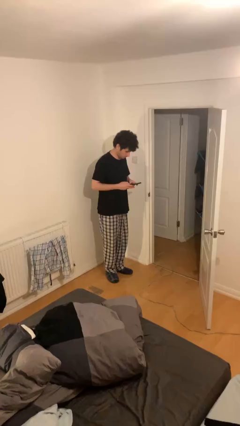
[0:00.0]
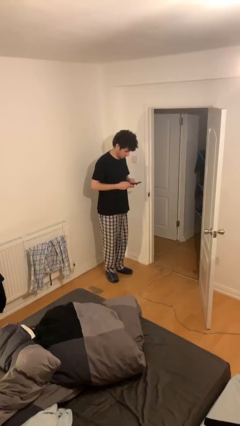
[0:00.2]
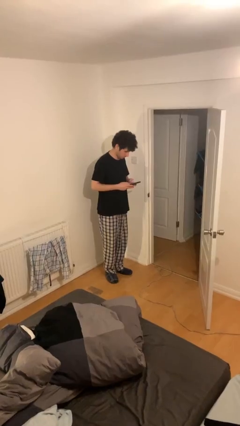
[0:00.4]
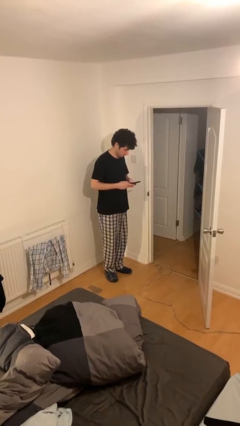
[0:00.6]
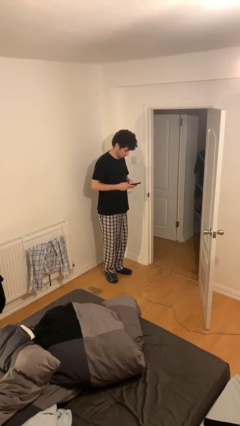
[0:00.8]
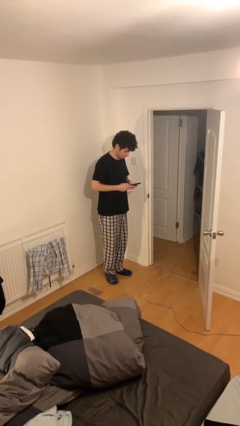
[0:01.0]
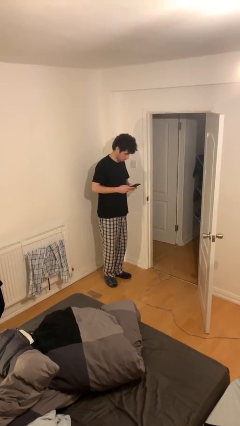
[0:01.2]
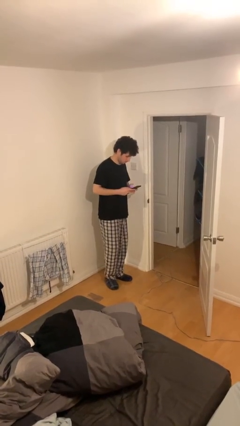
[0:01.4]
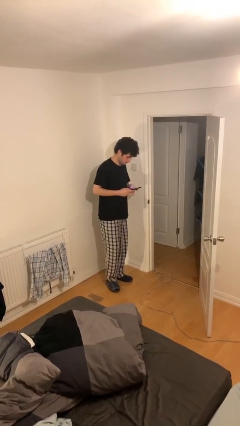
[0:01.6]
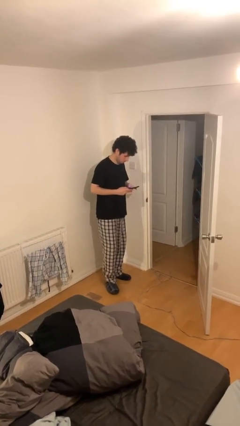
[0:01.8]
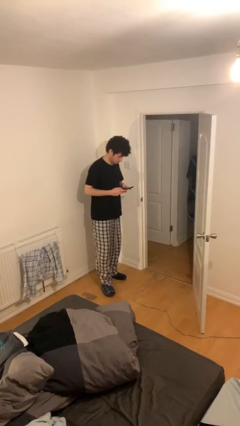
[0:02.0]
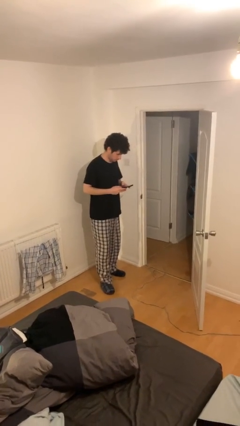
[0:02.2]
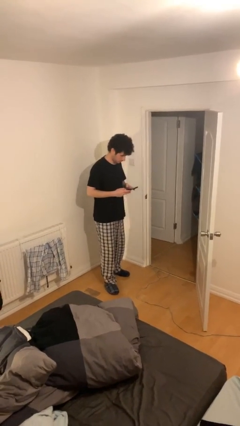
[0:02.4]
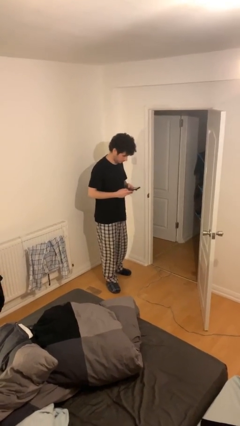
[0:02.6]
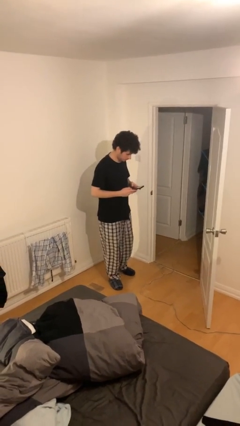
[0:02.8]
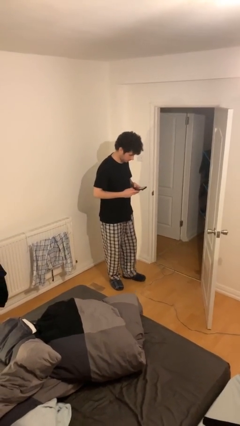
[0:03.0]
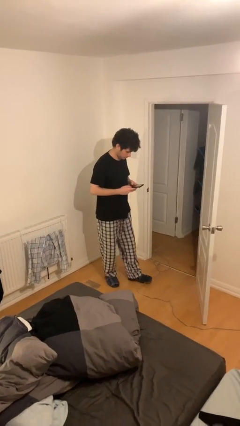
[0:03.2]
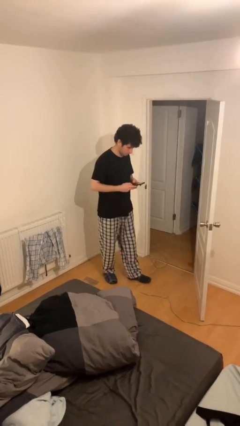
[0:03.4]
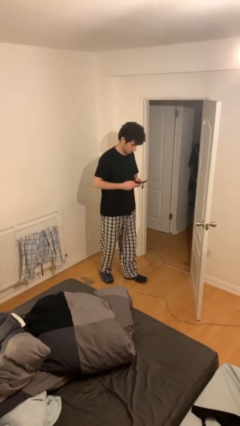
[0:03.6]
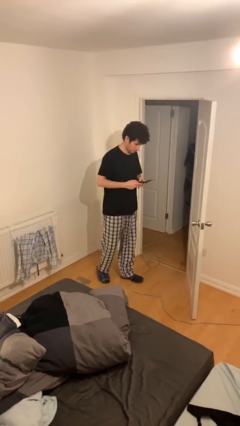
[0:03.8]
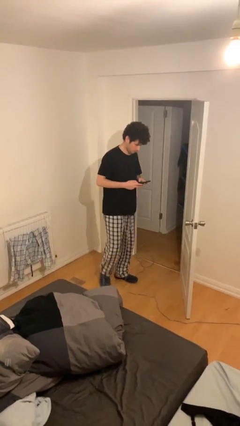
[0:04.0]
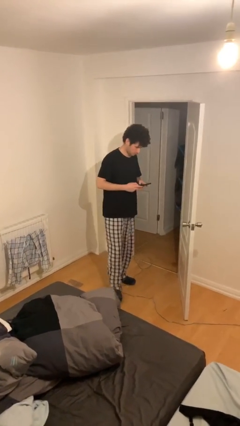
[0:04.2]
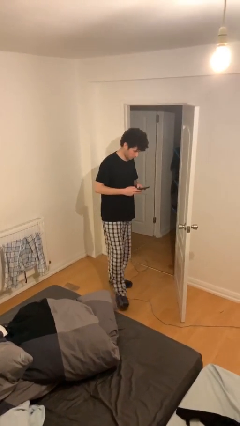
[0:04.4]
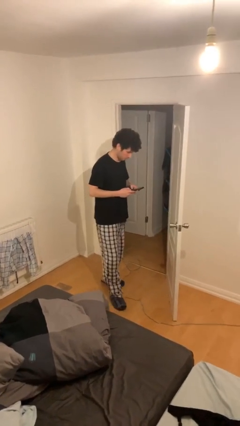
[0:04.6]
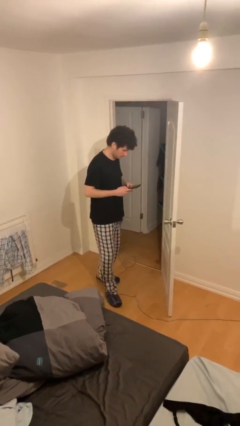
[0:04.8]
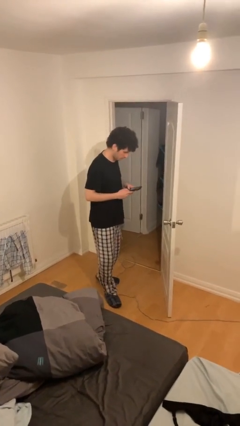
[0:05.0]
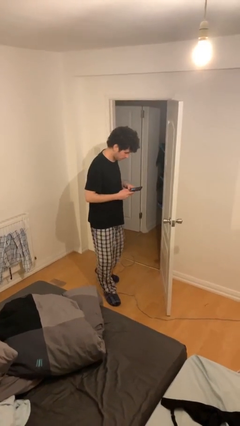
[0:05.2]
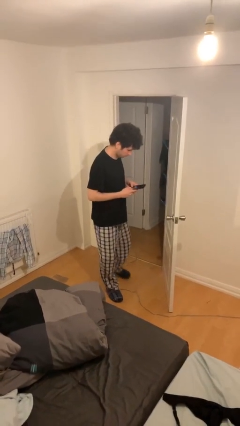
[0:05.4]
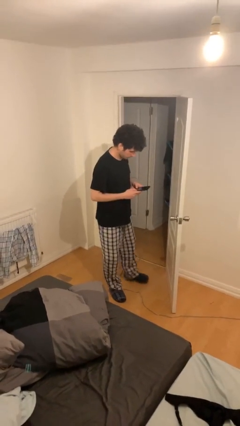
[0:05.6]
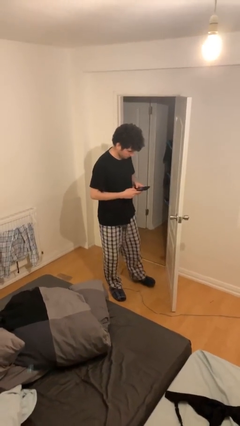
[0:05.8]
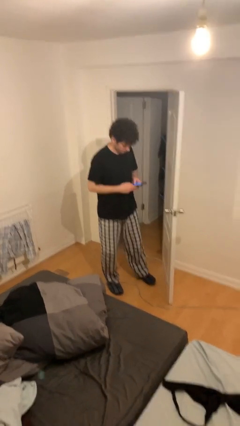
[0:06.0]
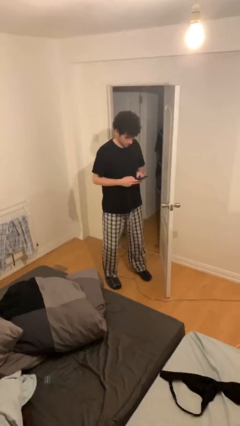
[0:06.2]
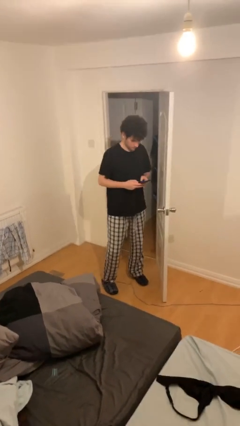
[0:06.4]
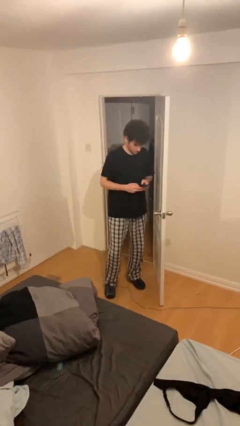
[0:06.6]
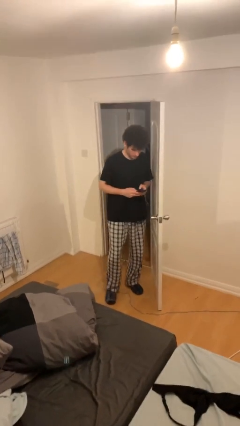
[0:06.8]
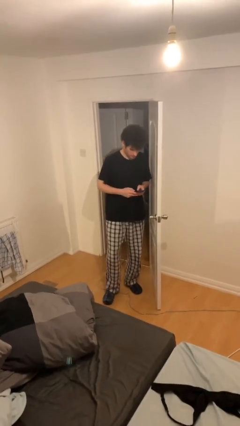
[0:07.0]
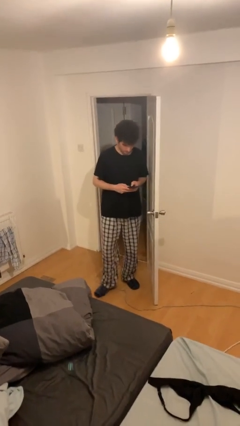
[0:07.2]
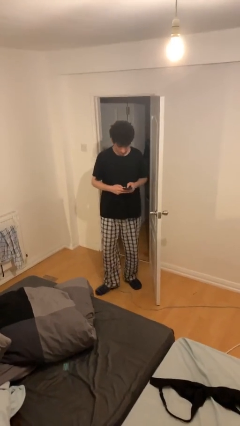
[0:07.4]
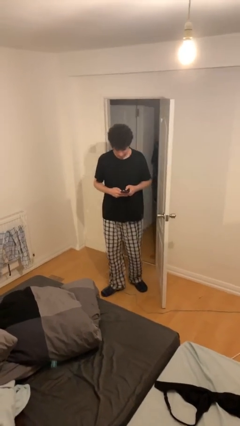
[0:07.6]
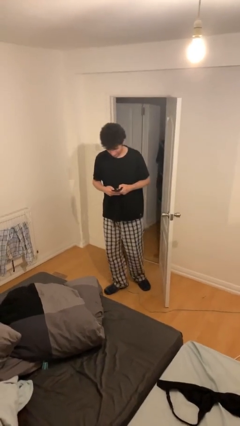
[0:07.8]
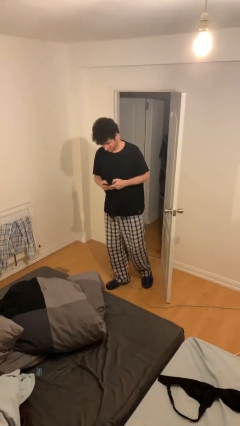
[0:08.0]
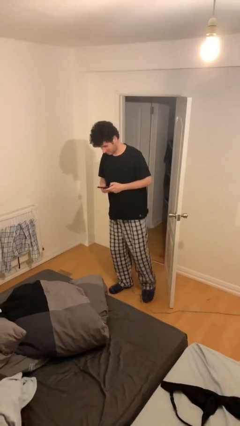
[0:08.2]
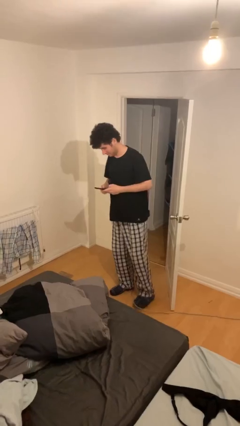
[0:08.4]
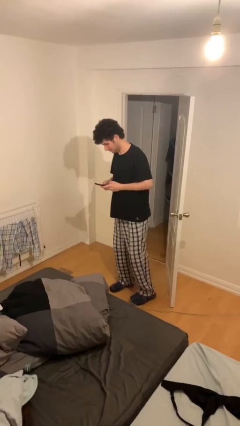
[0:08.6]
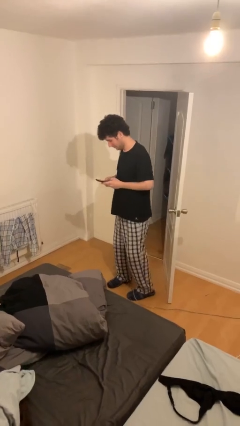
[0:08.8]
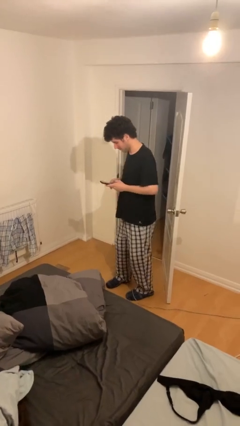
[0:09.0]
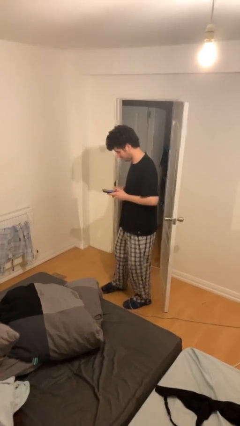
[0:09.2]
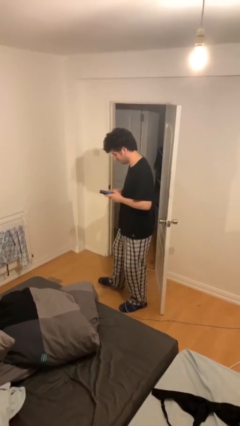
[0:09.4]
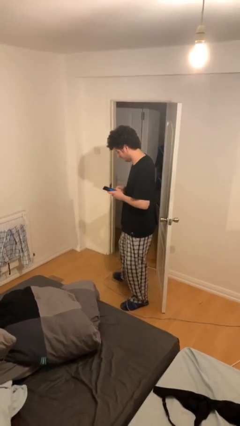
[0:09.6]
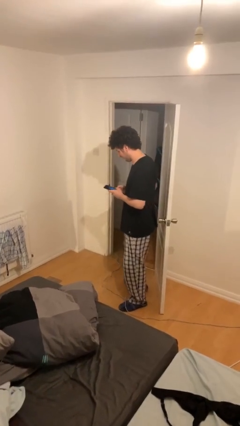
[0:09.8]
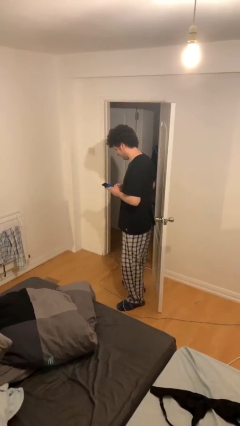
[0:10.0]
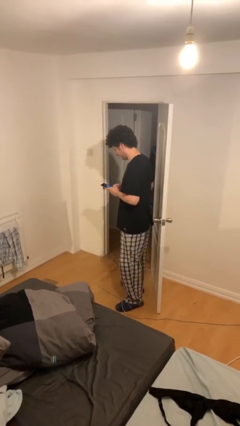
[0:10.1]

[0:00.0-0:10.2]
person texts on phone

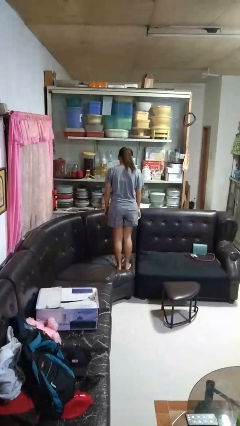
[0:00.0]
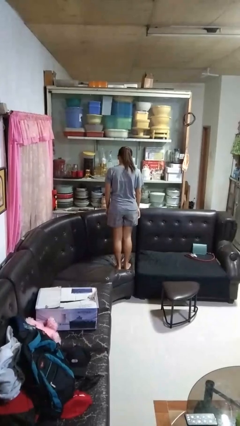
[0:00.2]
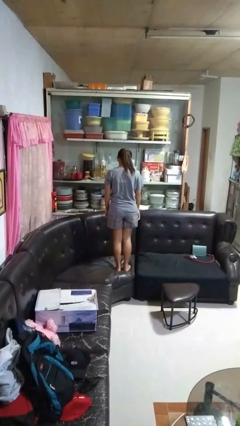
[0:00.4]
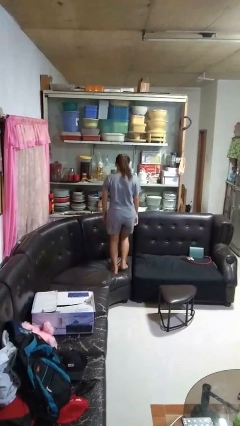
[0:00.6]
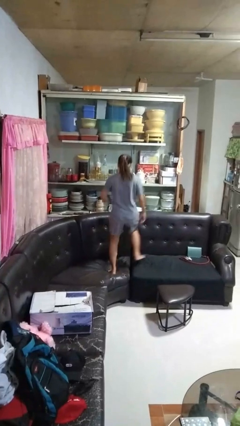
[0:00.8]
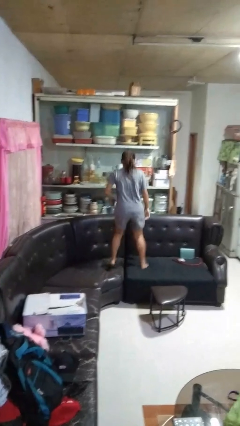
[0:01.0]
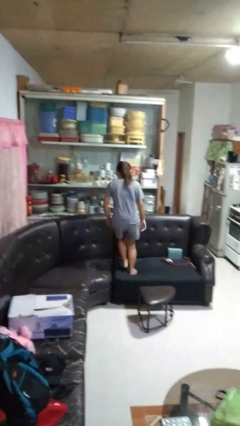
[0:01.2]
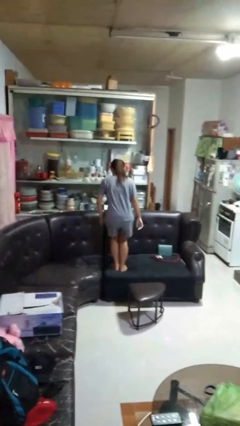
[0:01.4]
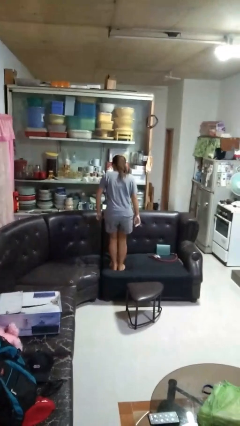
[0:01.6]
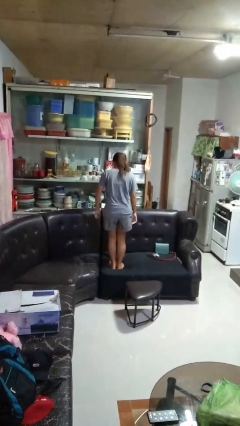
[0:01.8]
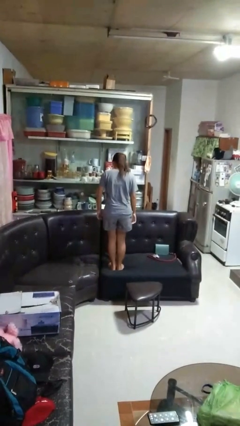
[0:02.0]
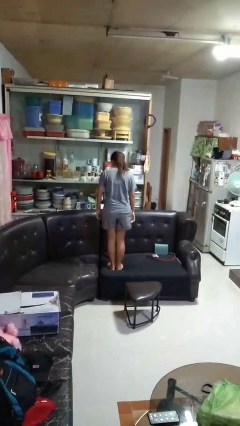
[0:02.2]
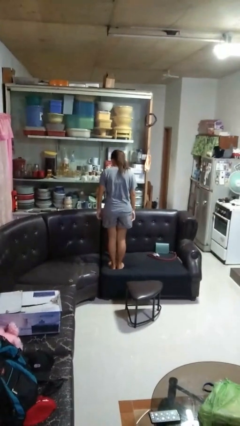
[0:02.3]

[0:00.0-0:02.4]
person jumps on couch

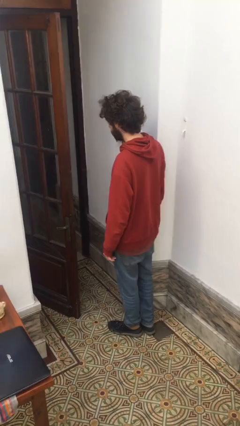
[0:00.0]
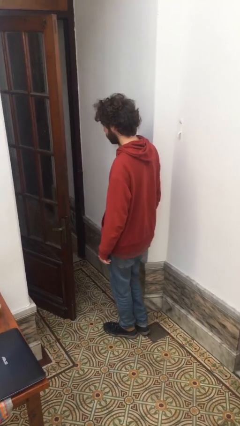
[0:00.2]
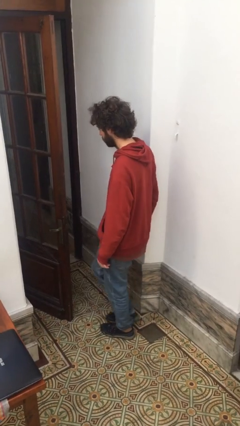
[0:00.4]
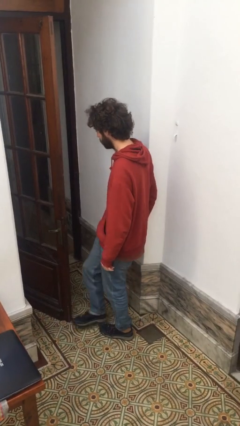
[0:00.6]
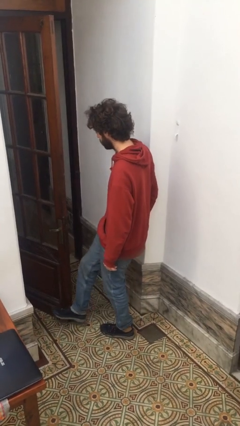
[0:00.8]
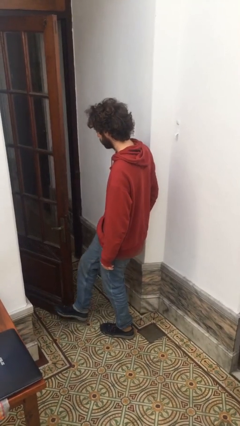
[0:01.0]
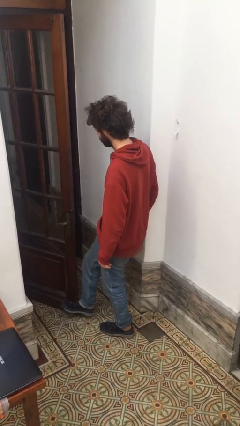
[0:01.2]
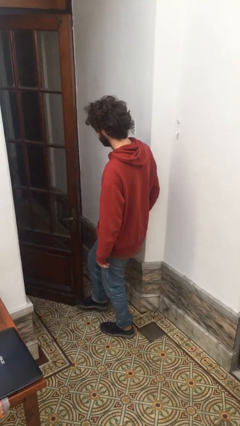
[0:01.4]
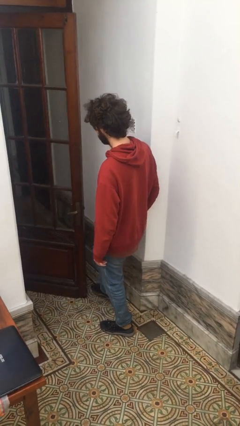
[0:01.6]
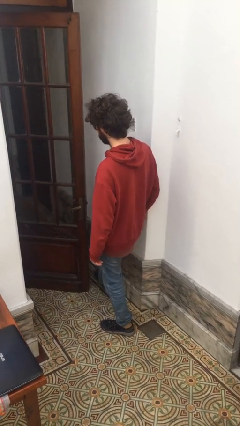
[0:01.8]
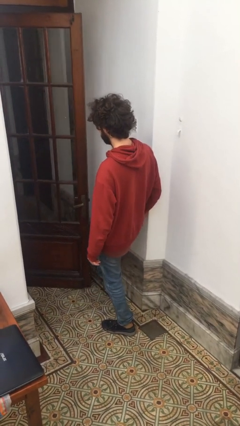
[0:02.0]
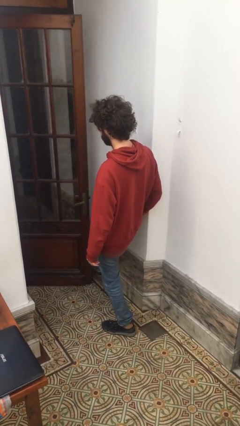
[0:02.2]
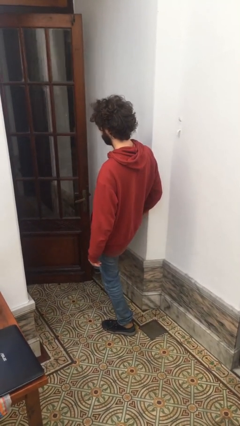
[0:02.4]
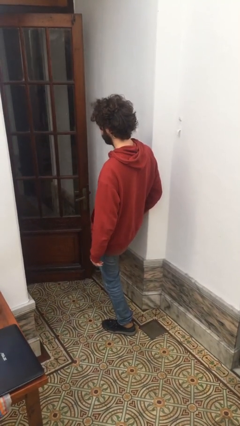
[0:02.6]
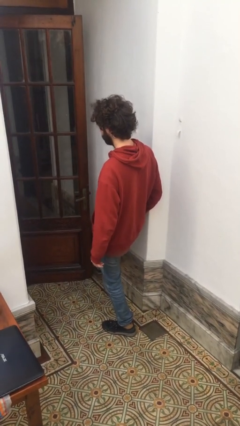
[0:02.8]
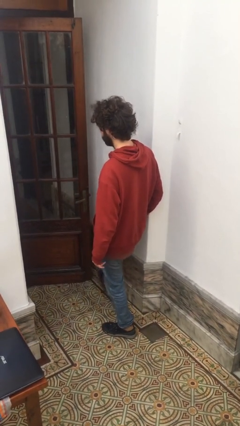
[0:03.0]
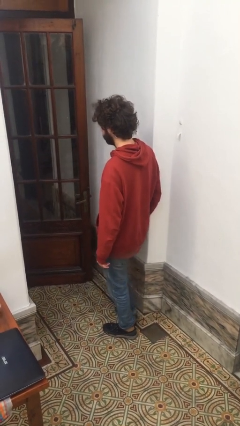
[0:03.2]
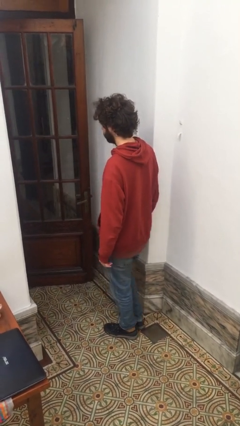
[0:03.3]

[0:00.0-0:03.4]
person closes door with foot

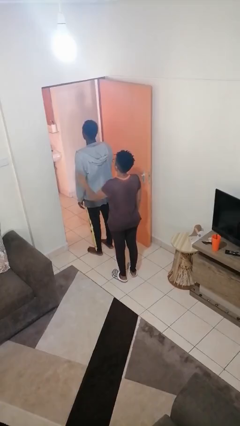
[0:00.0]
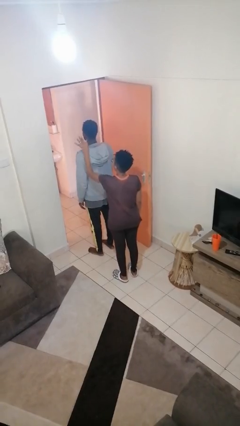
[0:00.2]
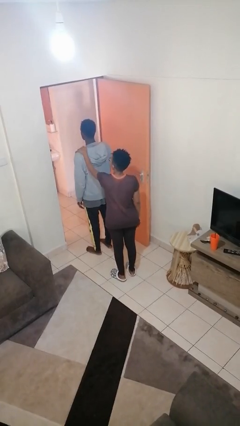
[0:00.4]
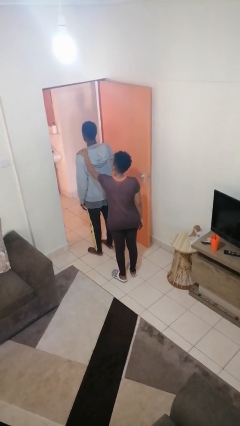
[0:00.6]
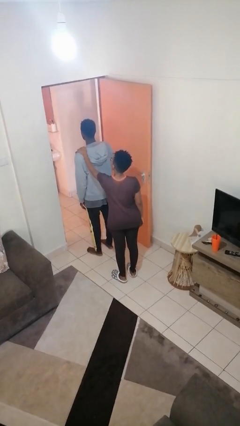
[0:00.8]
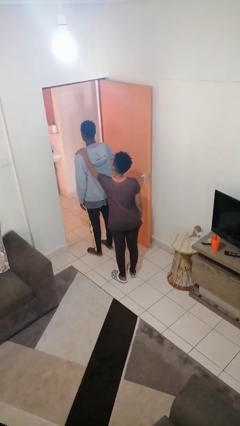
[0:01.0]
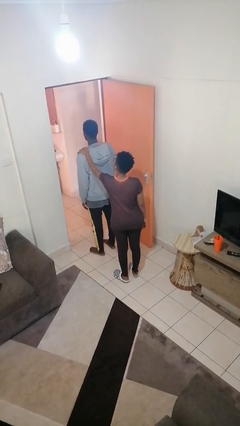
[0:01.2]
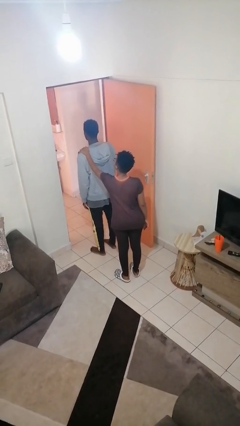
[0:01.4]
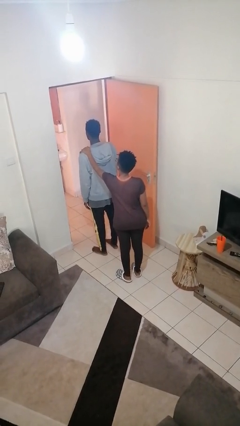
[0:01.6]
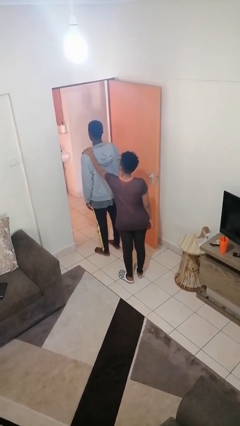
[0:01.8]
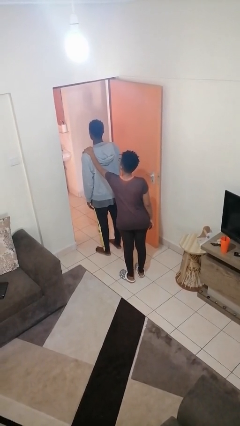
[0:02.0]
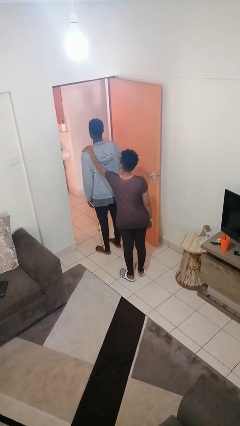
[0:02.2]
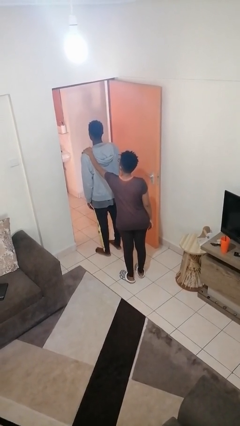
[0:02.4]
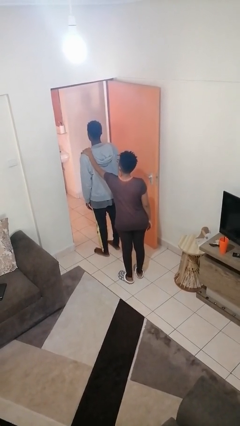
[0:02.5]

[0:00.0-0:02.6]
person grabs person by shoulder
